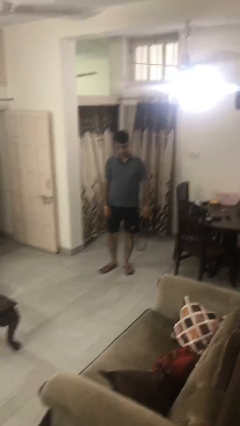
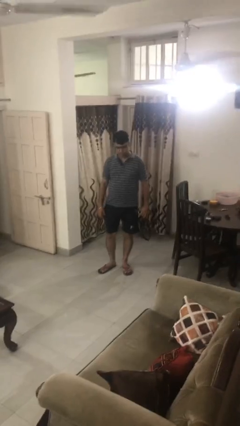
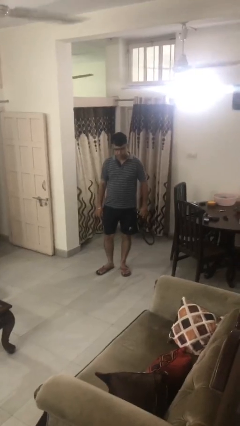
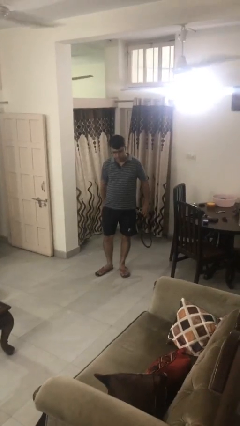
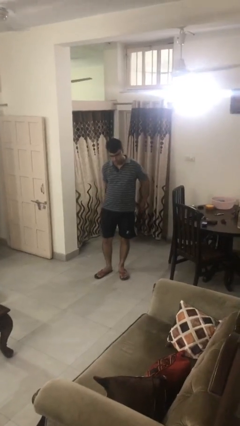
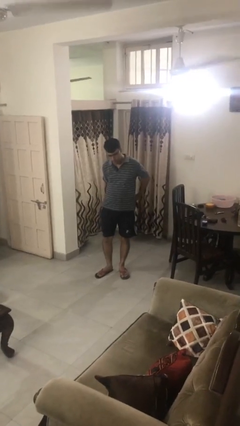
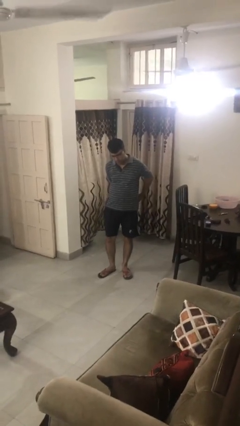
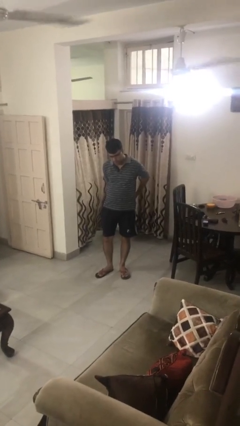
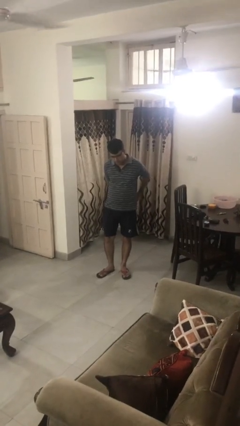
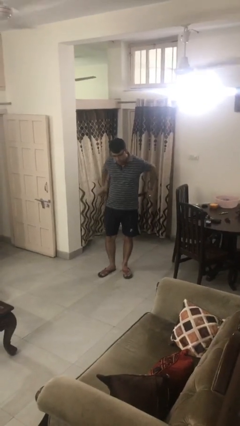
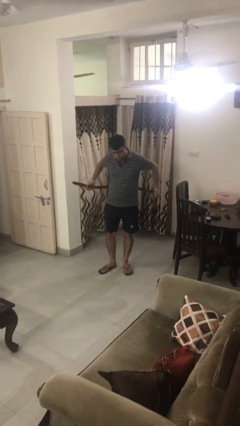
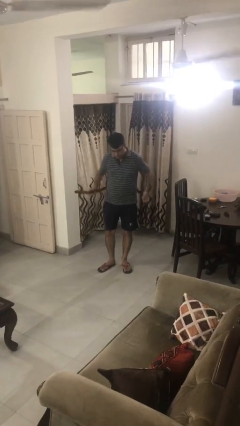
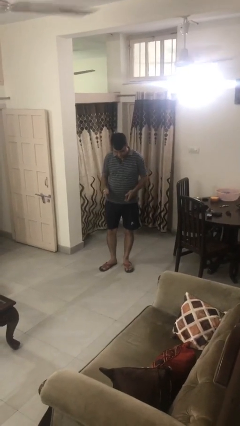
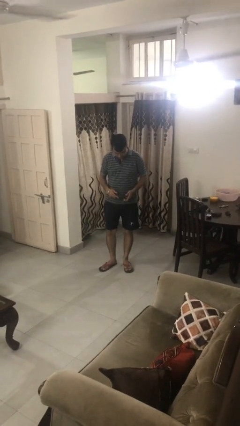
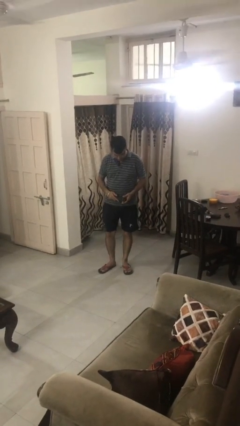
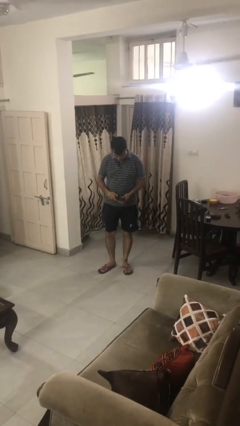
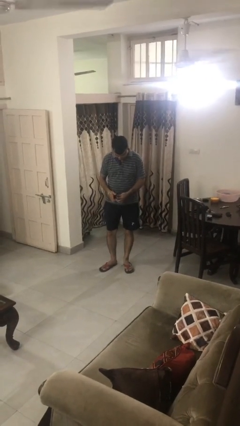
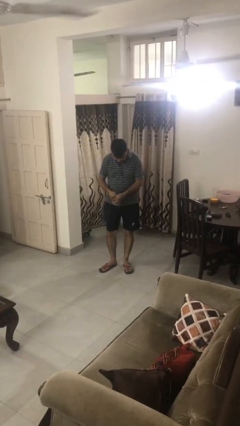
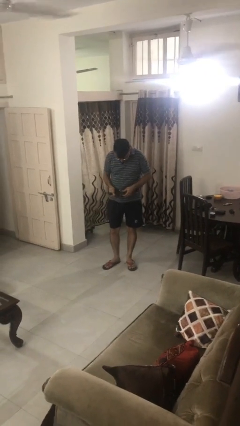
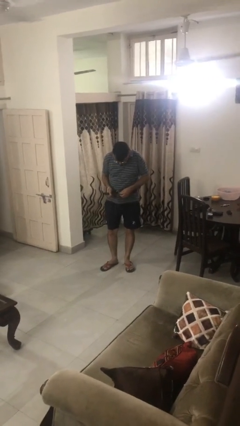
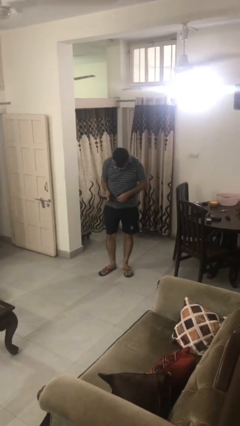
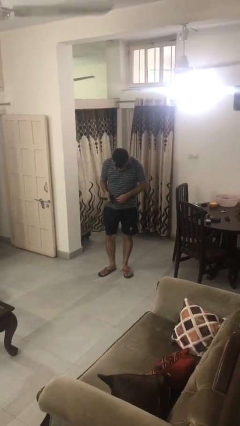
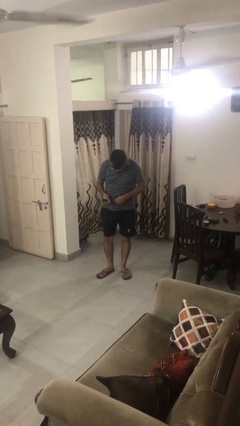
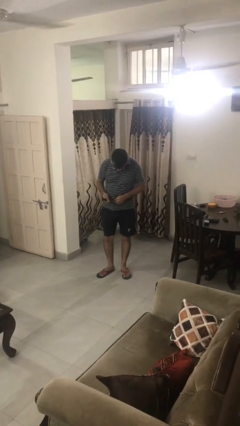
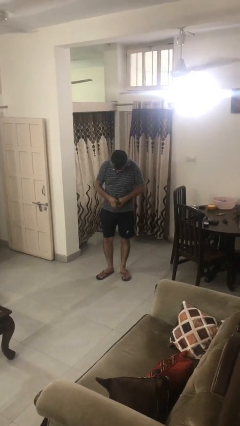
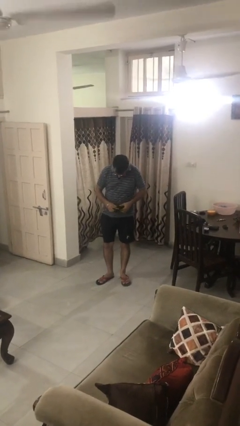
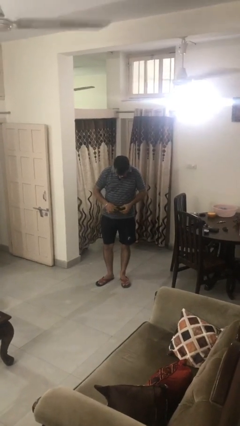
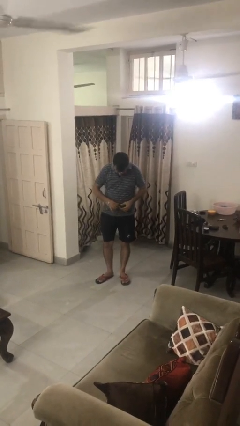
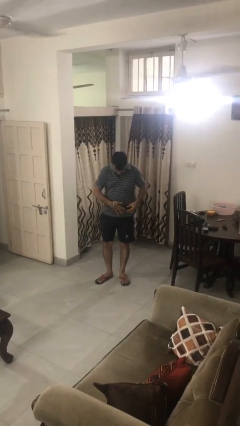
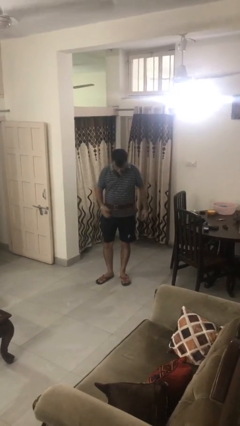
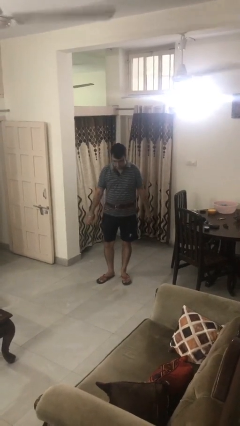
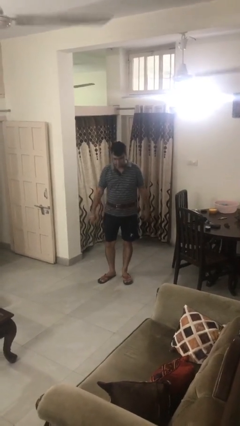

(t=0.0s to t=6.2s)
person puts on belt

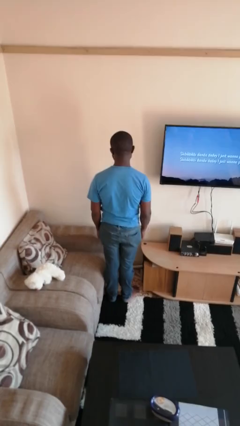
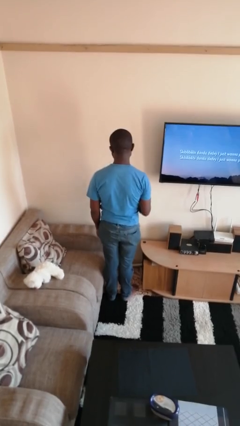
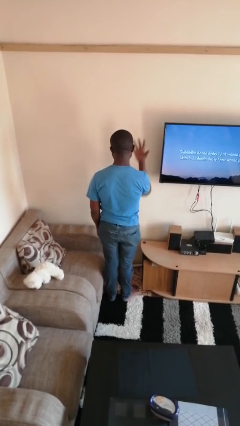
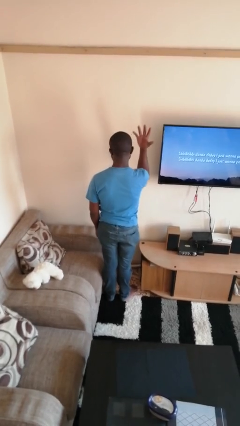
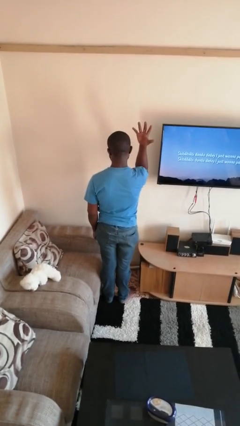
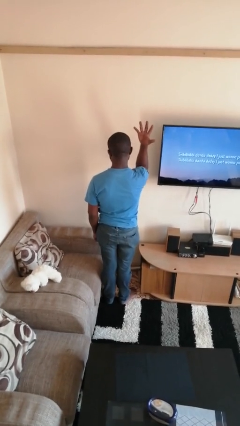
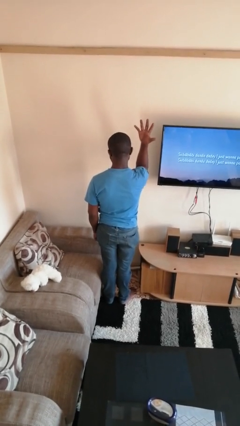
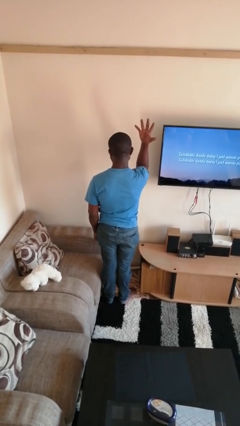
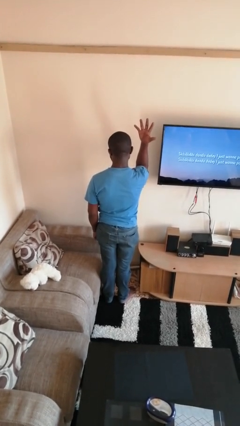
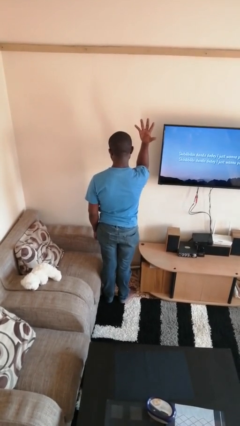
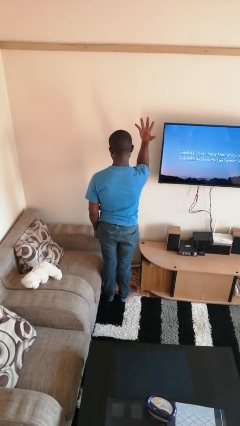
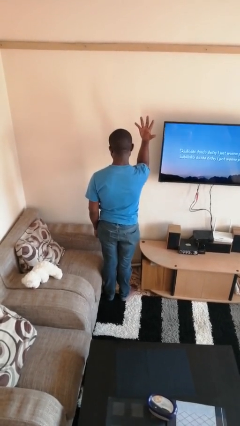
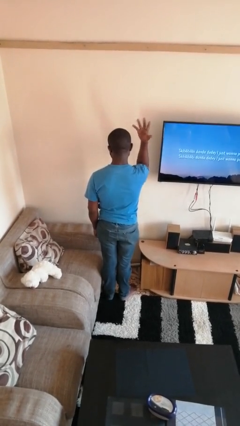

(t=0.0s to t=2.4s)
person gestures number five

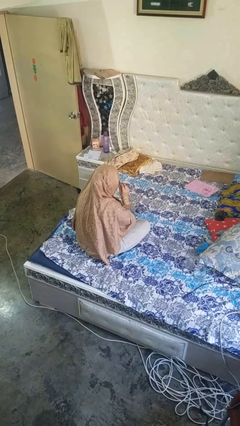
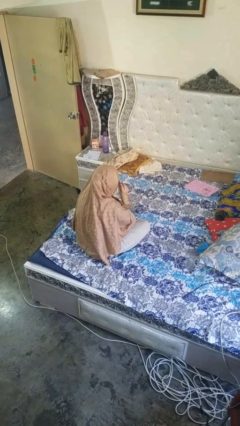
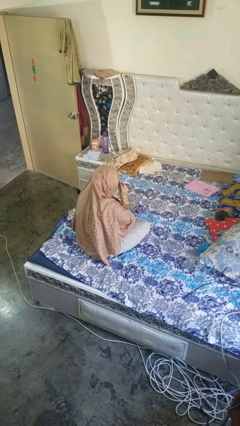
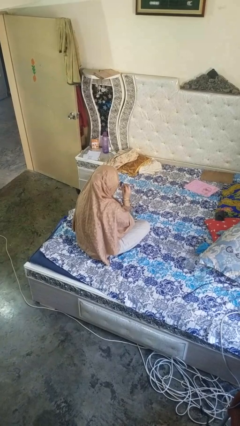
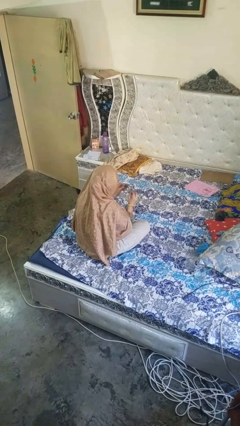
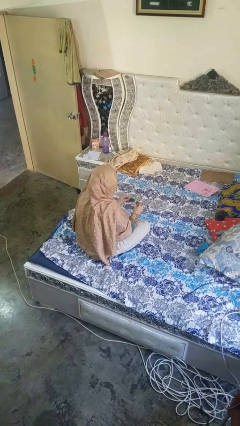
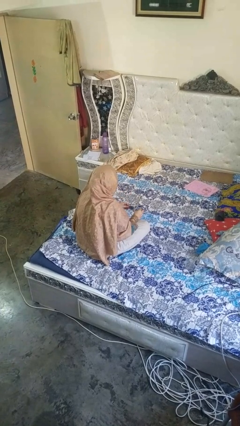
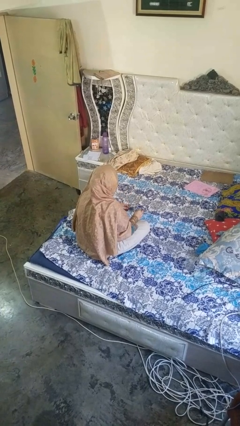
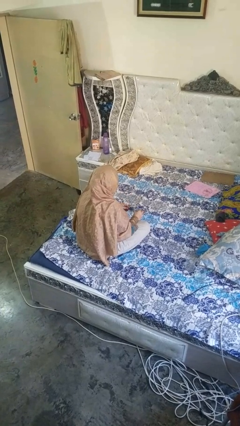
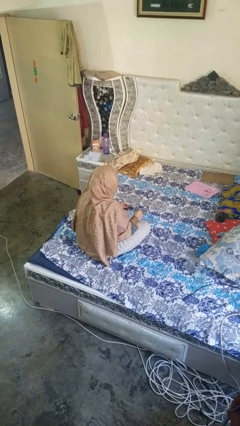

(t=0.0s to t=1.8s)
person takes off glasses

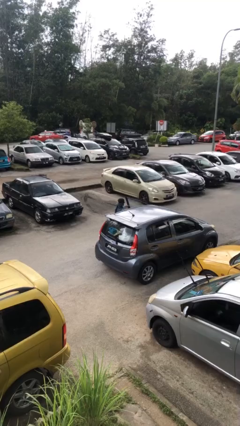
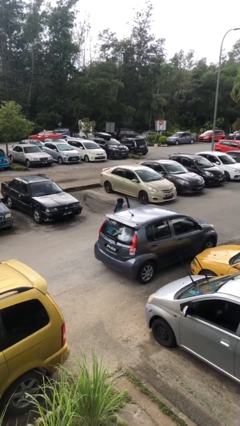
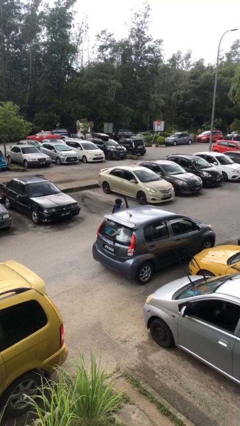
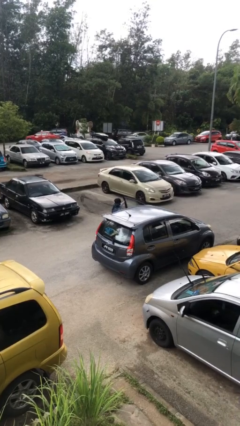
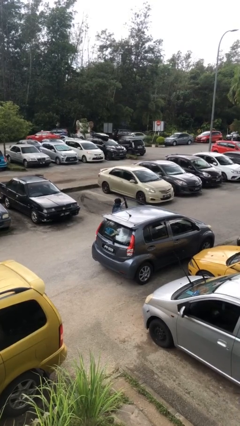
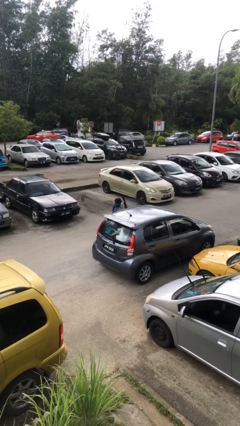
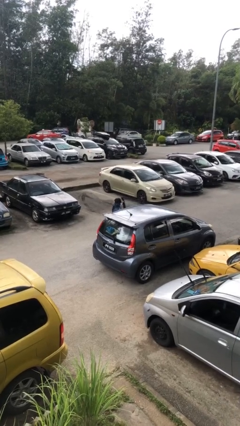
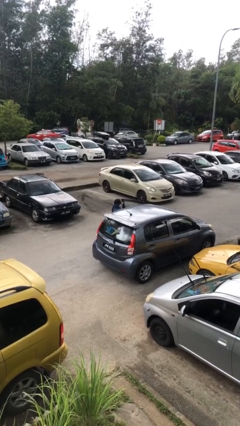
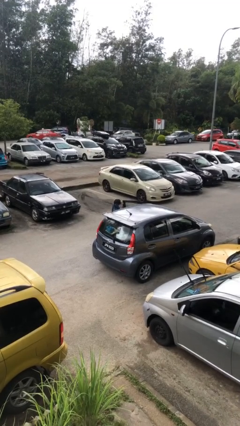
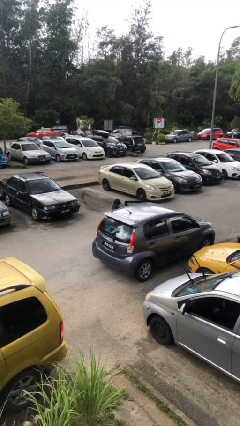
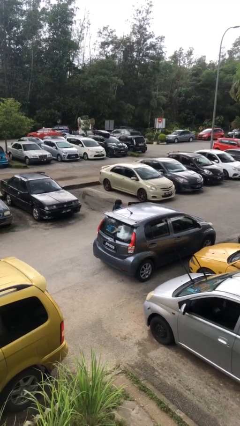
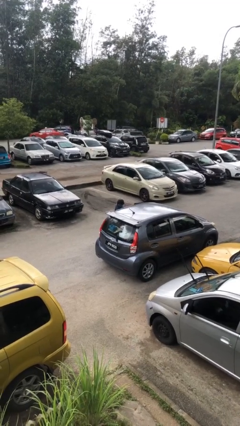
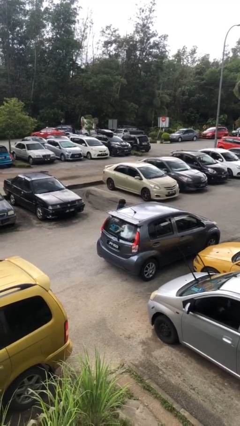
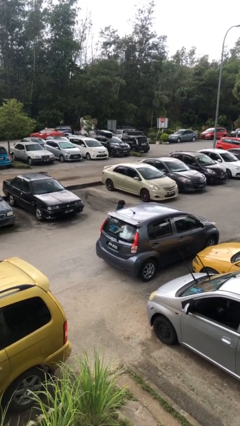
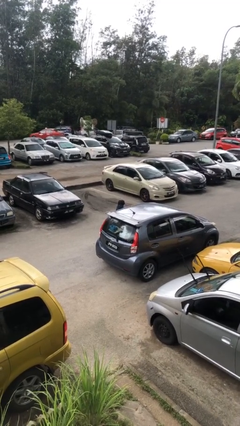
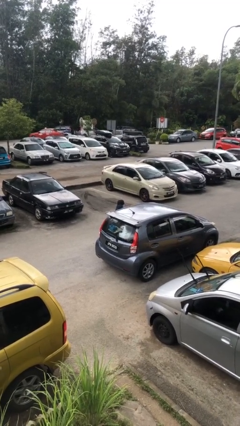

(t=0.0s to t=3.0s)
person closes car door

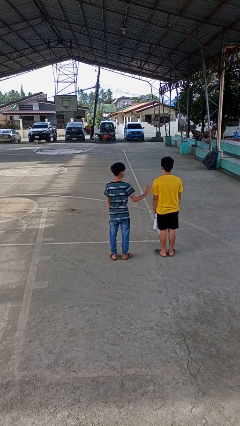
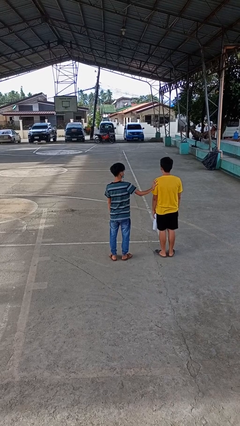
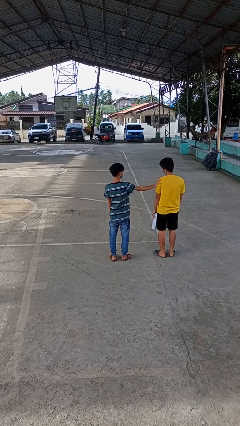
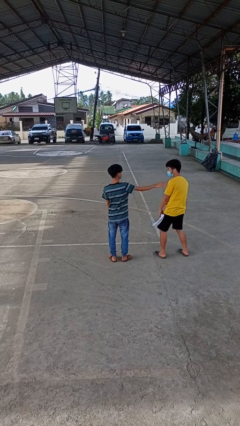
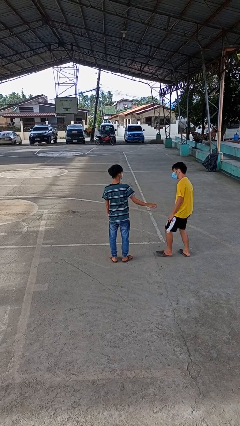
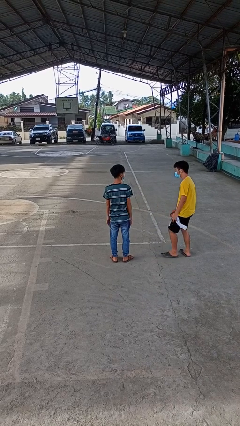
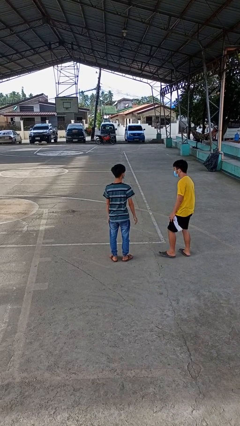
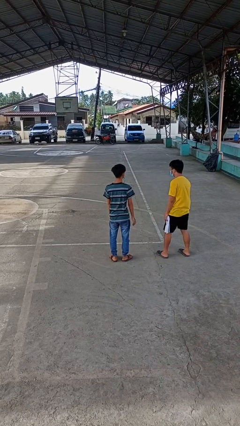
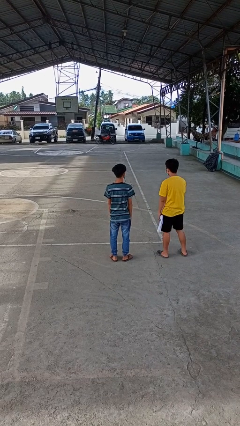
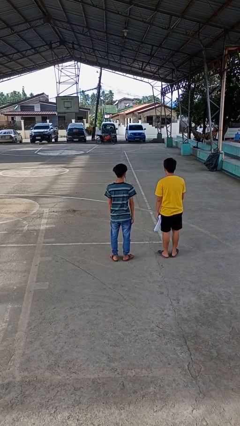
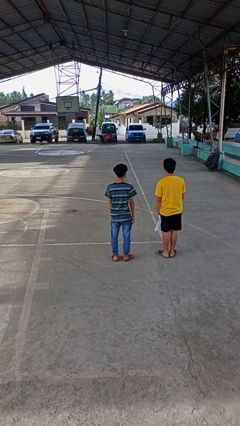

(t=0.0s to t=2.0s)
person shoves person

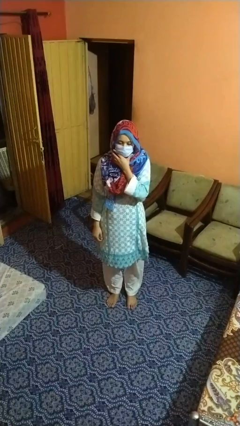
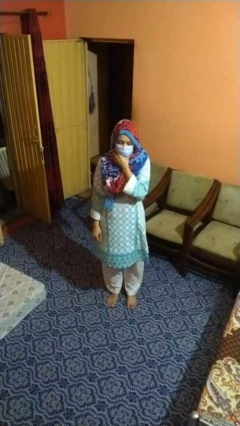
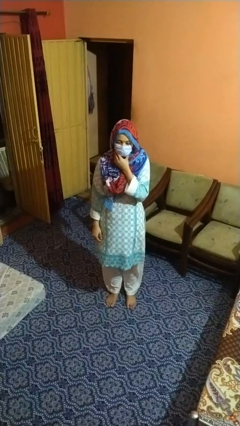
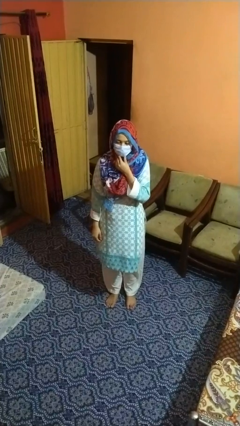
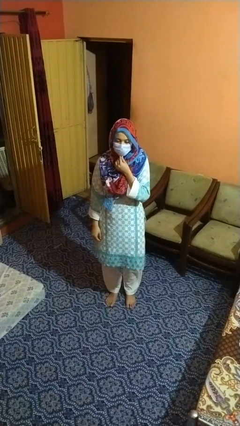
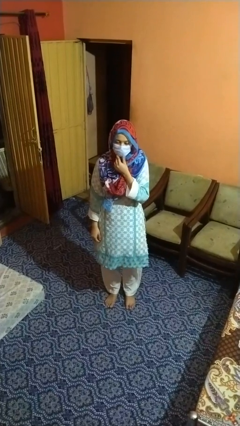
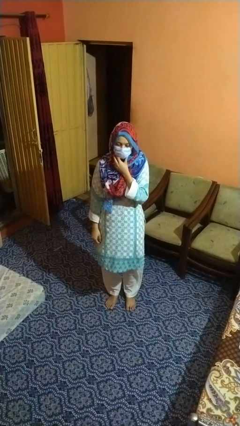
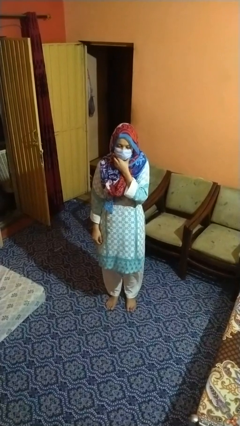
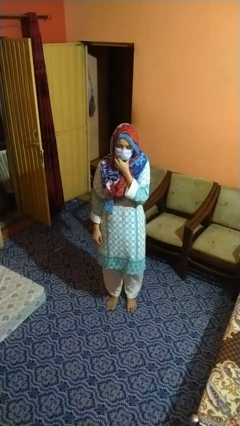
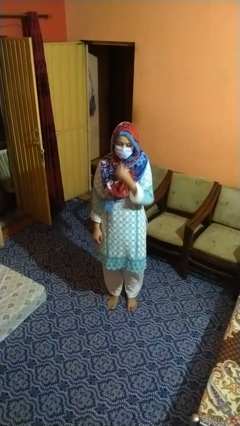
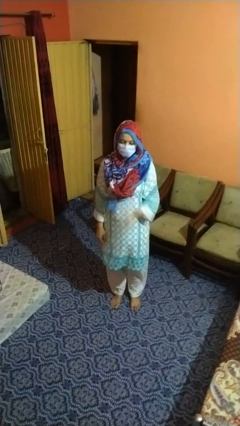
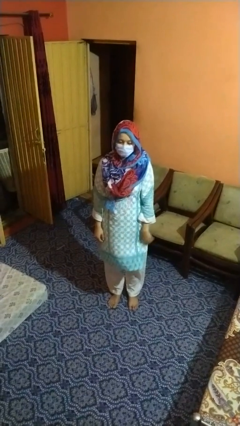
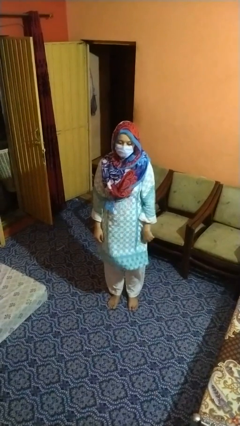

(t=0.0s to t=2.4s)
person strokes chin
